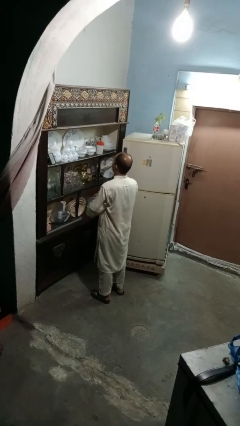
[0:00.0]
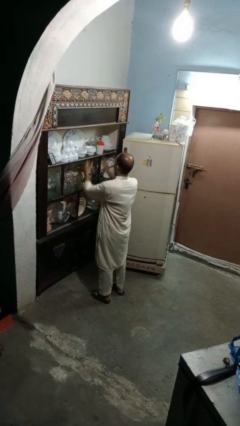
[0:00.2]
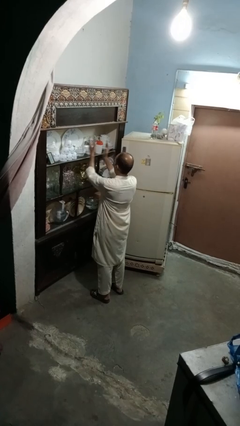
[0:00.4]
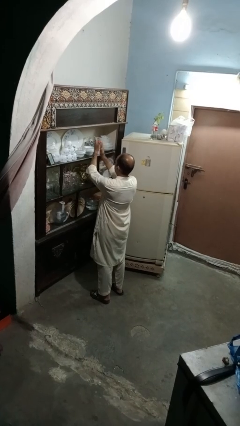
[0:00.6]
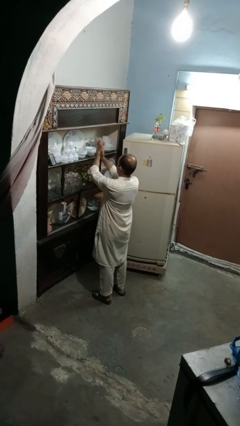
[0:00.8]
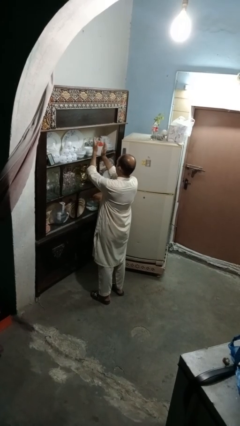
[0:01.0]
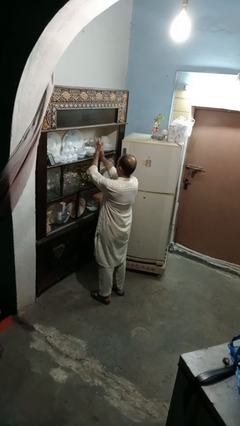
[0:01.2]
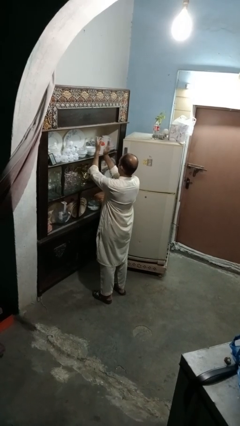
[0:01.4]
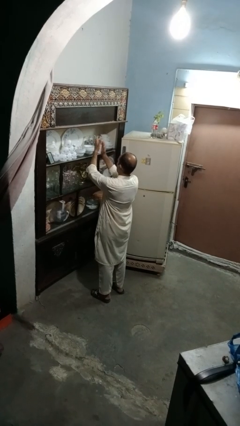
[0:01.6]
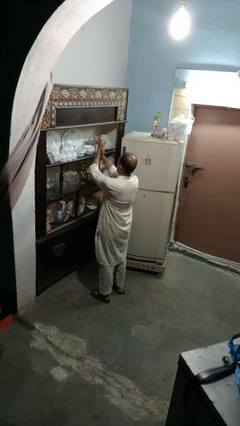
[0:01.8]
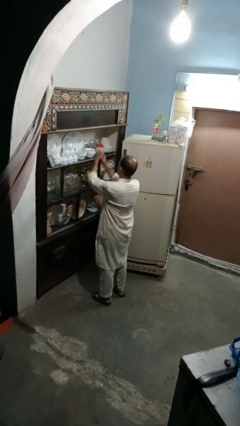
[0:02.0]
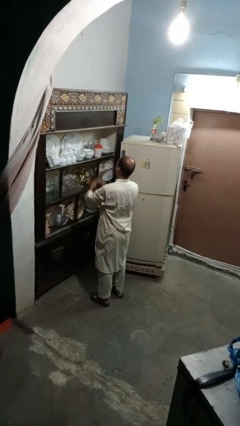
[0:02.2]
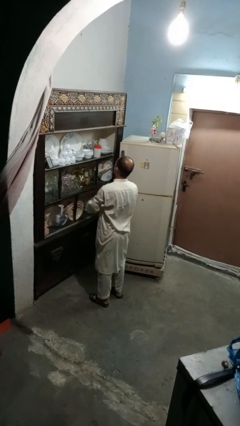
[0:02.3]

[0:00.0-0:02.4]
person claps hands

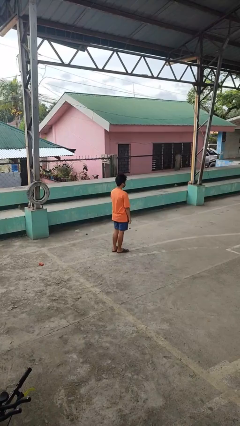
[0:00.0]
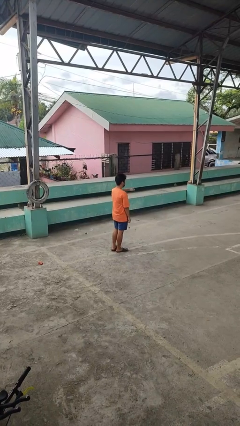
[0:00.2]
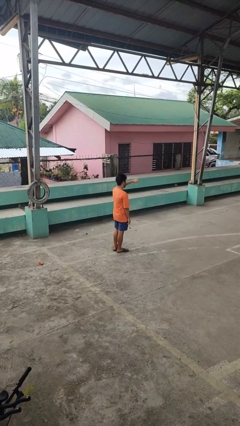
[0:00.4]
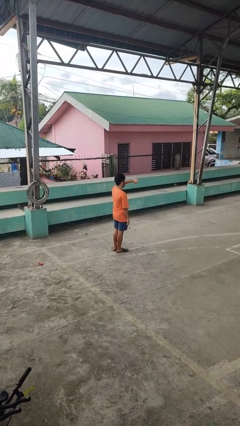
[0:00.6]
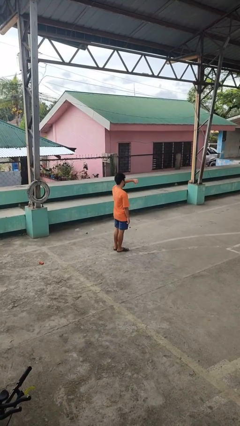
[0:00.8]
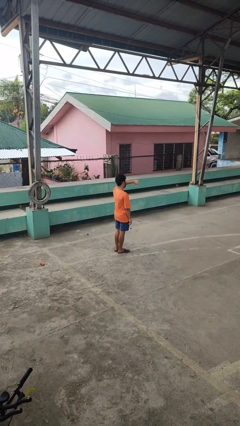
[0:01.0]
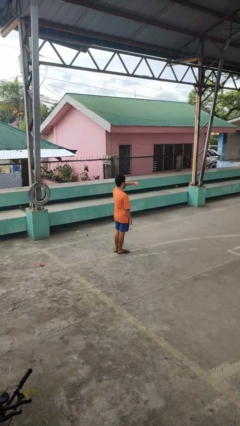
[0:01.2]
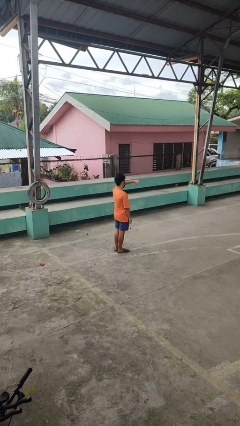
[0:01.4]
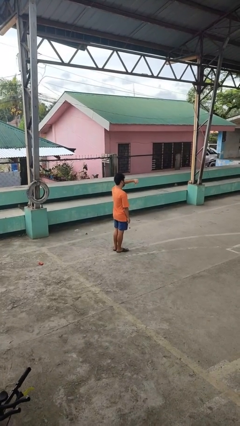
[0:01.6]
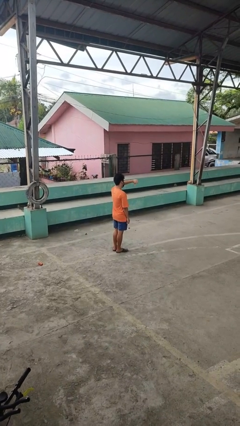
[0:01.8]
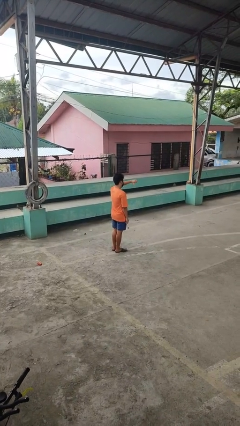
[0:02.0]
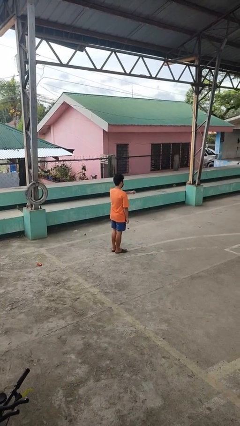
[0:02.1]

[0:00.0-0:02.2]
person gestures thumbs down

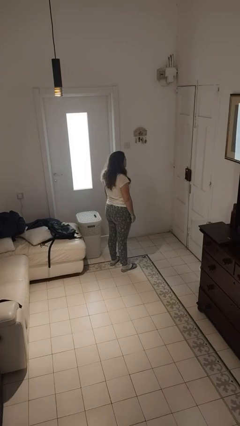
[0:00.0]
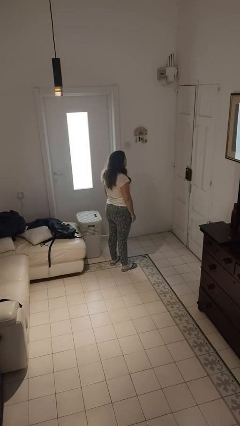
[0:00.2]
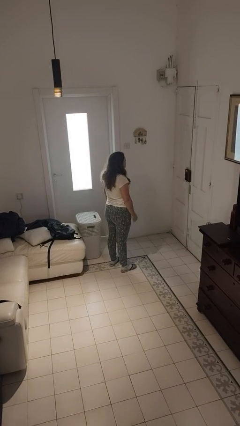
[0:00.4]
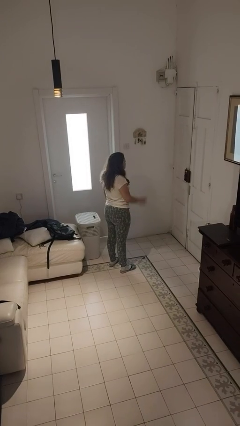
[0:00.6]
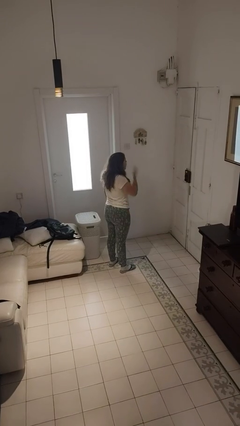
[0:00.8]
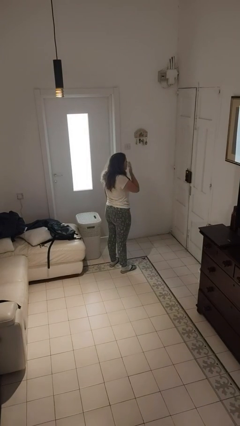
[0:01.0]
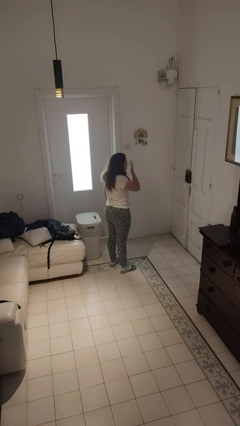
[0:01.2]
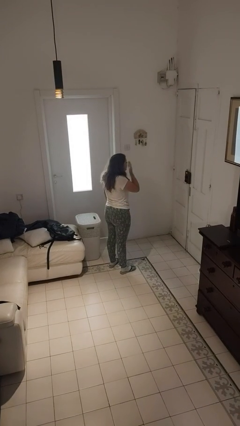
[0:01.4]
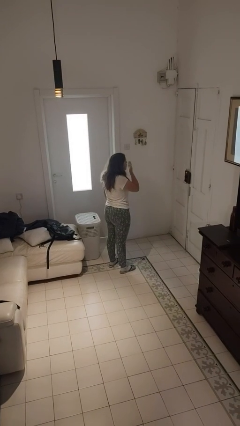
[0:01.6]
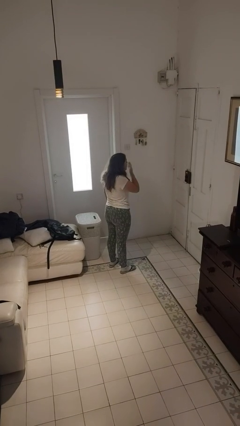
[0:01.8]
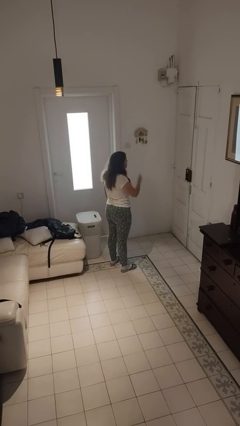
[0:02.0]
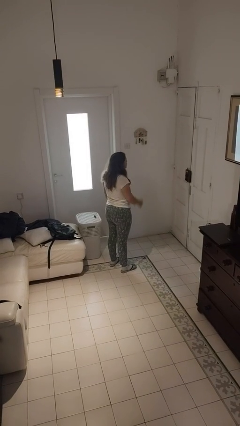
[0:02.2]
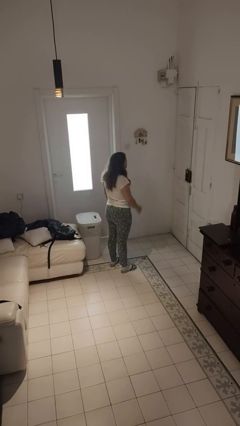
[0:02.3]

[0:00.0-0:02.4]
person yawns

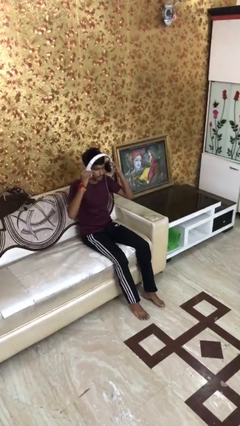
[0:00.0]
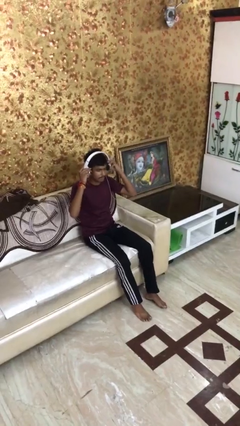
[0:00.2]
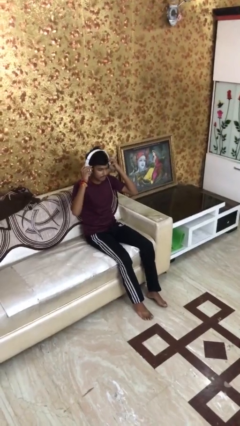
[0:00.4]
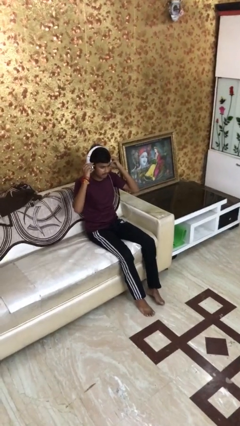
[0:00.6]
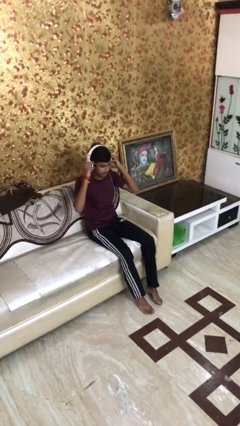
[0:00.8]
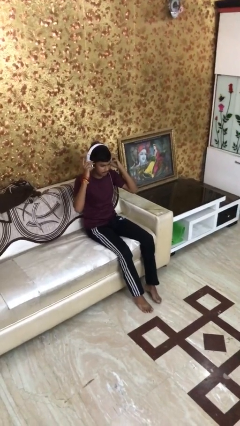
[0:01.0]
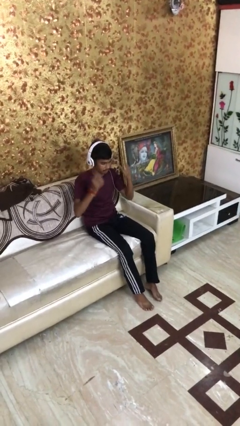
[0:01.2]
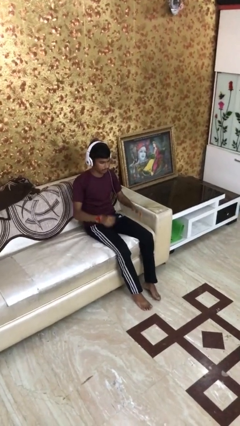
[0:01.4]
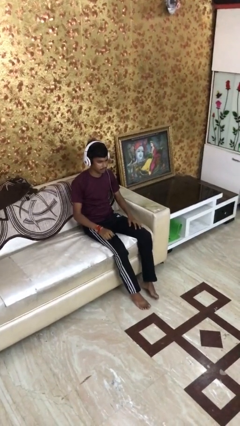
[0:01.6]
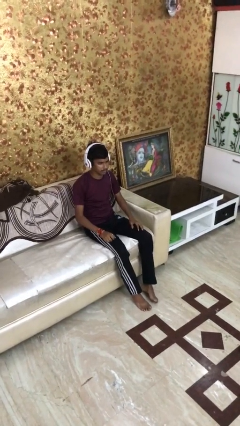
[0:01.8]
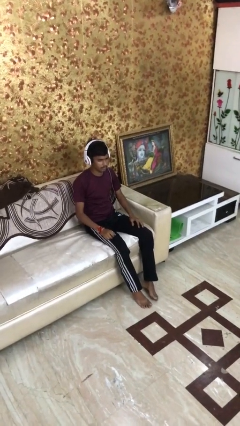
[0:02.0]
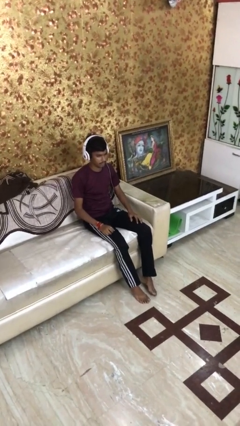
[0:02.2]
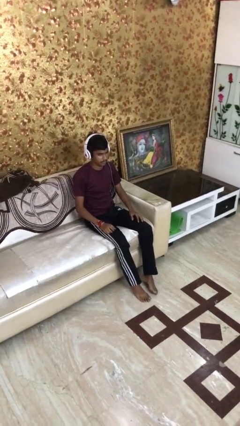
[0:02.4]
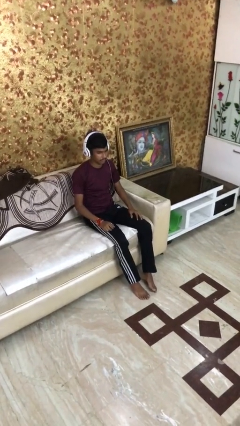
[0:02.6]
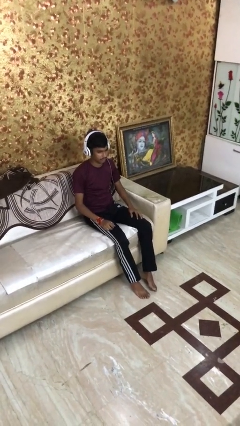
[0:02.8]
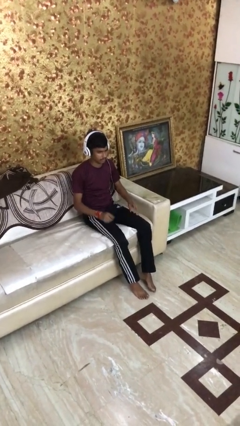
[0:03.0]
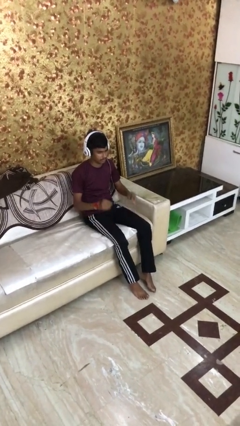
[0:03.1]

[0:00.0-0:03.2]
person puts on headphones

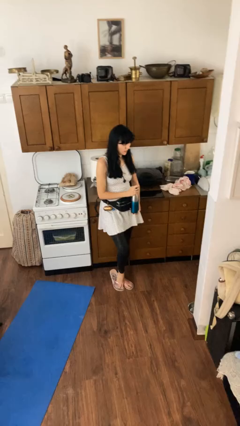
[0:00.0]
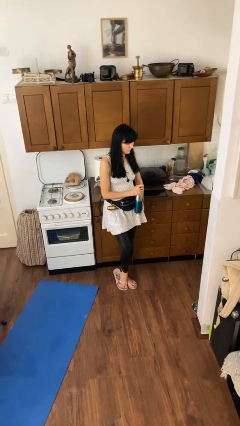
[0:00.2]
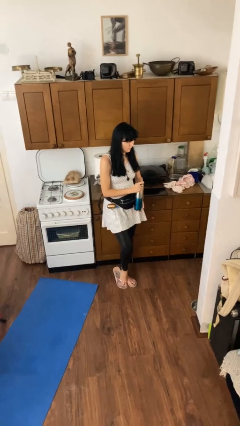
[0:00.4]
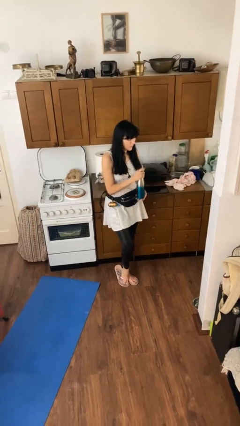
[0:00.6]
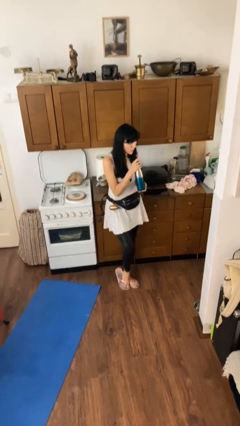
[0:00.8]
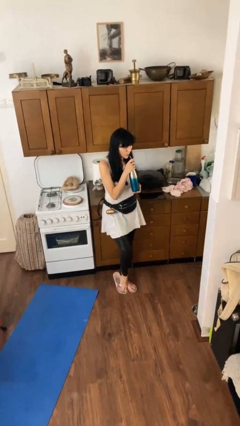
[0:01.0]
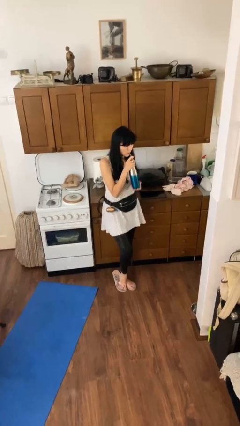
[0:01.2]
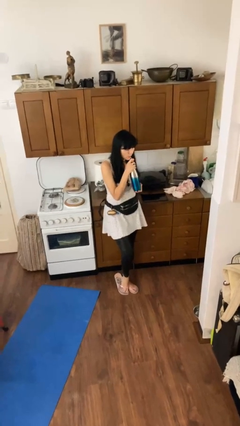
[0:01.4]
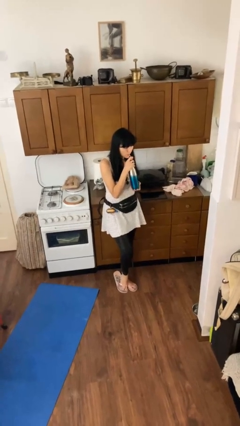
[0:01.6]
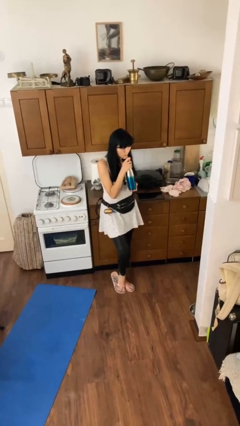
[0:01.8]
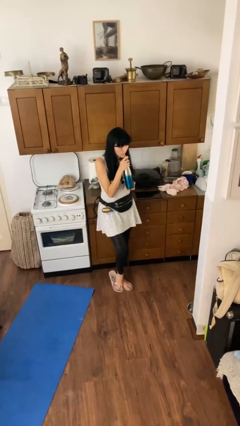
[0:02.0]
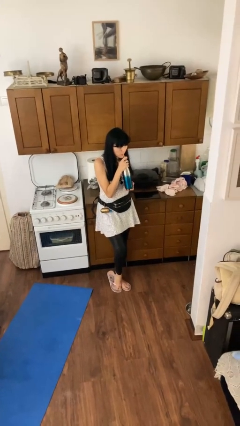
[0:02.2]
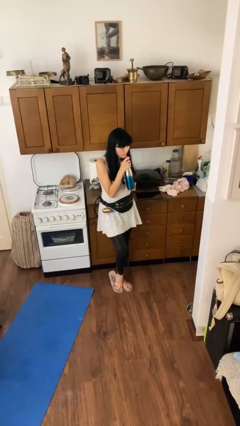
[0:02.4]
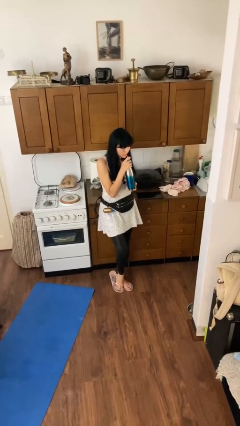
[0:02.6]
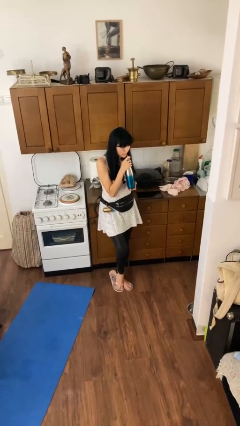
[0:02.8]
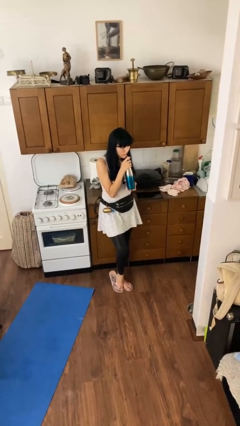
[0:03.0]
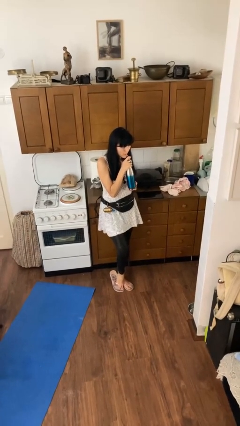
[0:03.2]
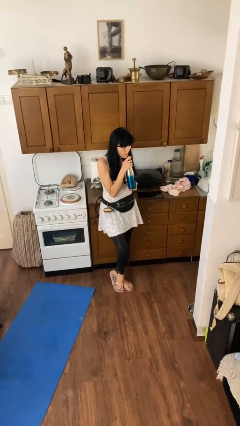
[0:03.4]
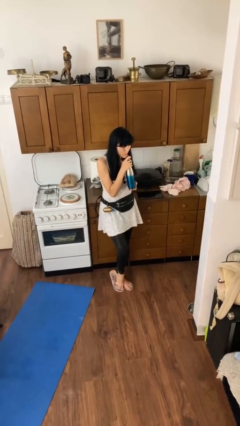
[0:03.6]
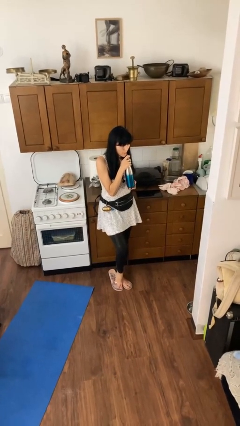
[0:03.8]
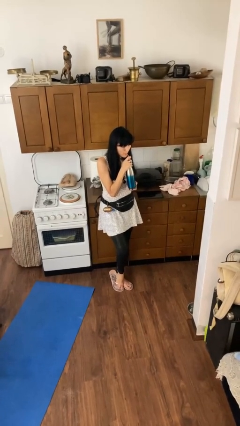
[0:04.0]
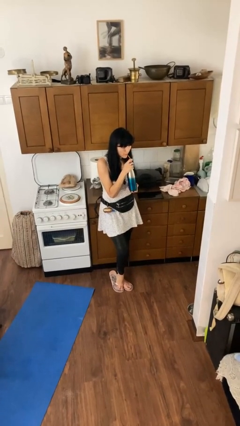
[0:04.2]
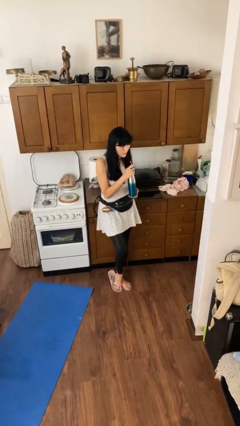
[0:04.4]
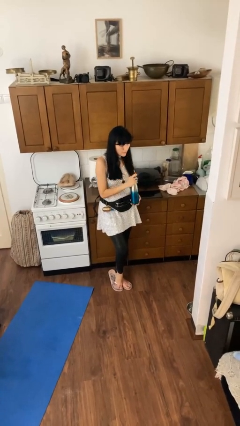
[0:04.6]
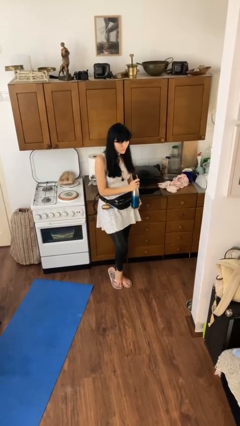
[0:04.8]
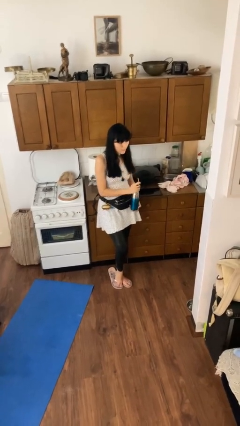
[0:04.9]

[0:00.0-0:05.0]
person drinks from straw

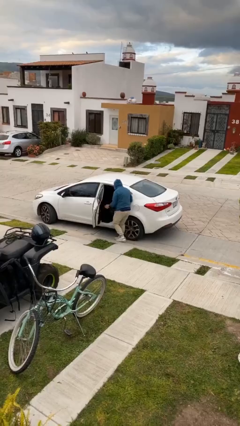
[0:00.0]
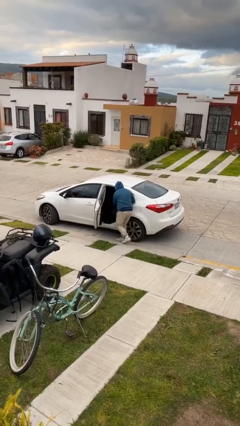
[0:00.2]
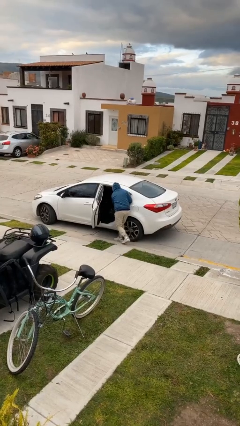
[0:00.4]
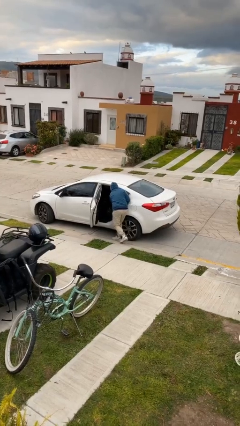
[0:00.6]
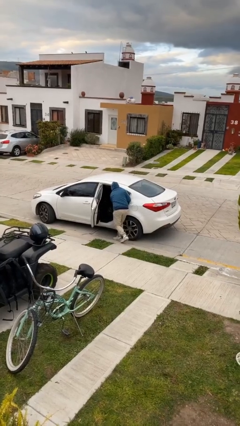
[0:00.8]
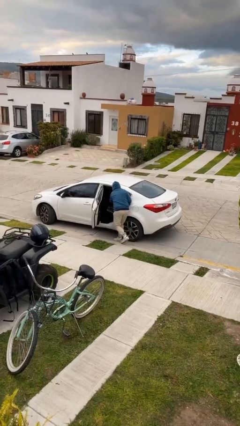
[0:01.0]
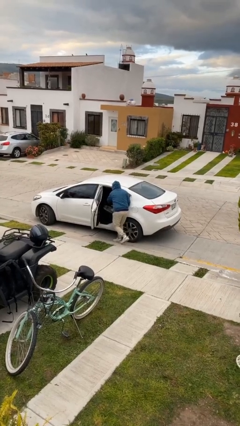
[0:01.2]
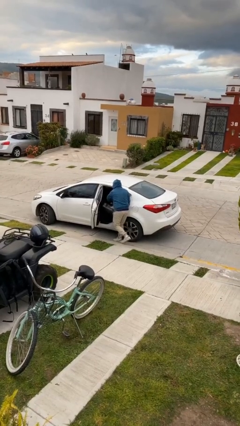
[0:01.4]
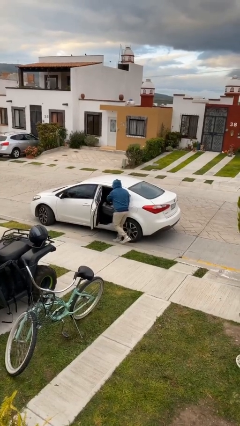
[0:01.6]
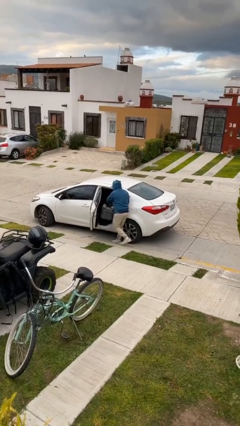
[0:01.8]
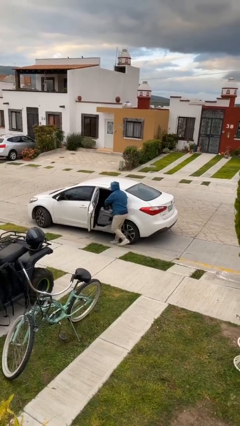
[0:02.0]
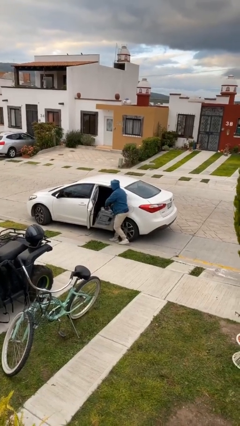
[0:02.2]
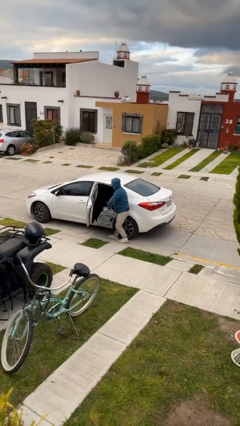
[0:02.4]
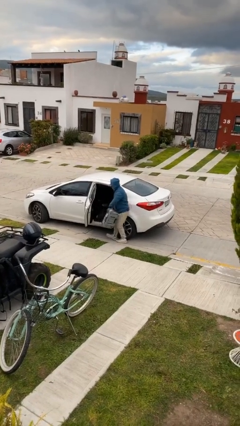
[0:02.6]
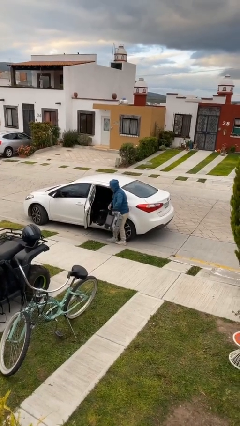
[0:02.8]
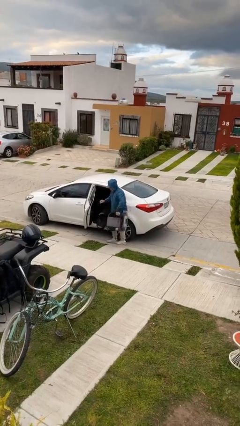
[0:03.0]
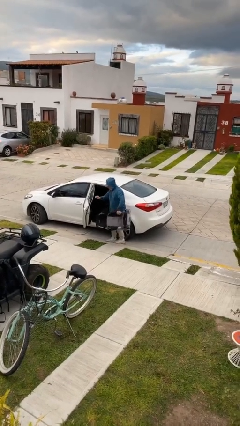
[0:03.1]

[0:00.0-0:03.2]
person unloads car
